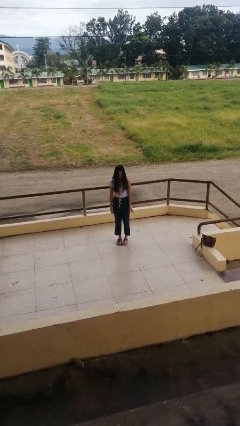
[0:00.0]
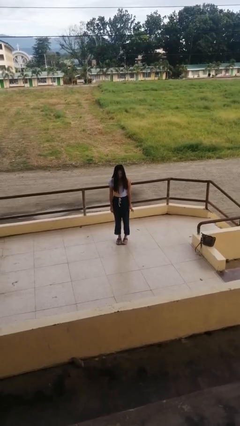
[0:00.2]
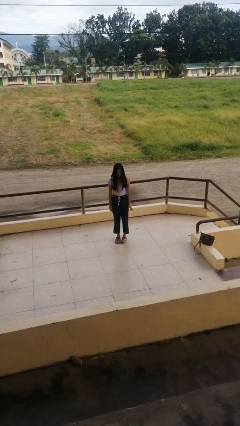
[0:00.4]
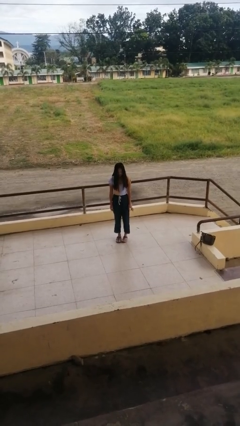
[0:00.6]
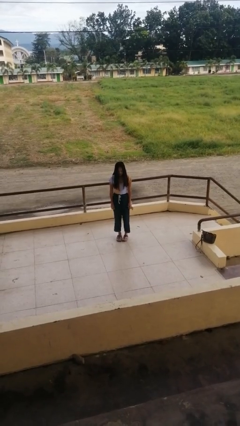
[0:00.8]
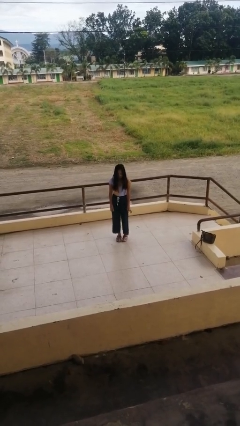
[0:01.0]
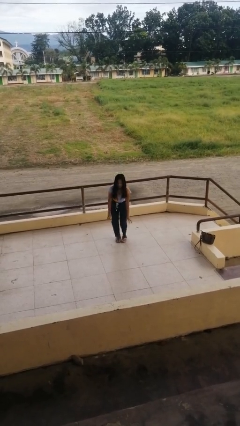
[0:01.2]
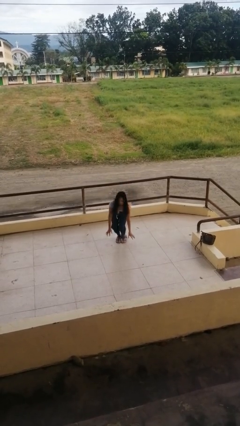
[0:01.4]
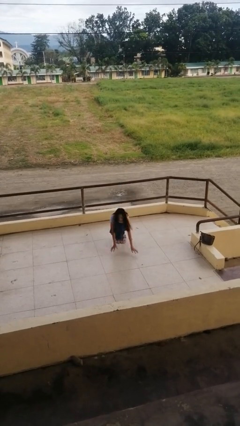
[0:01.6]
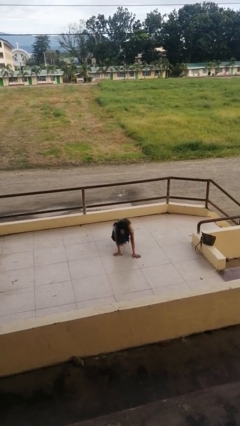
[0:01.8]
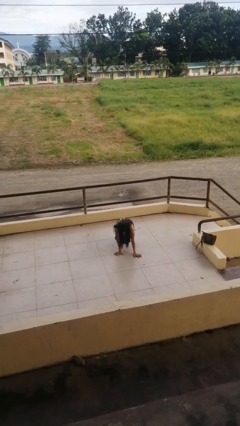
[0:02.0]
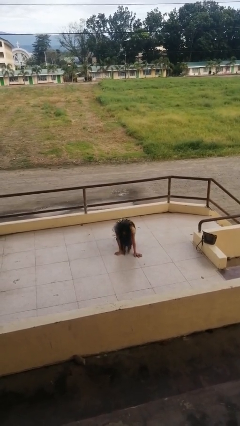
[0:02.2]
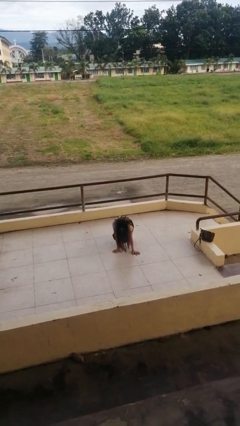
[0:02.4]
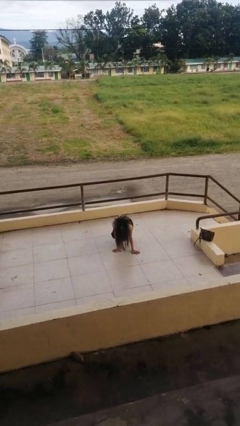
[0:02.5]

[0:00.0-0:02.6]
person falls while standing

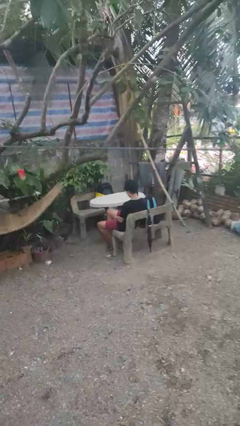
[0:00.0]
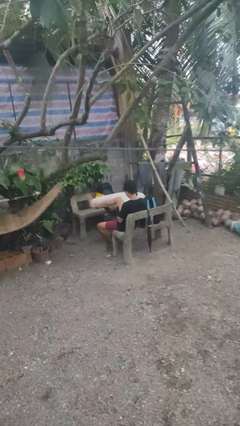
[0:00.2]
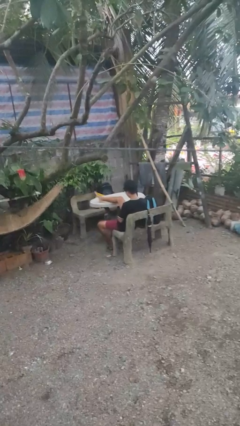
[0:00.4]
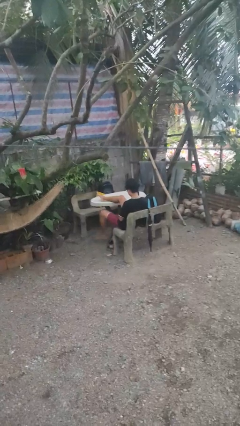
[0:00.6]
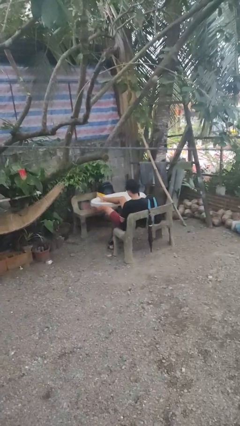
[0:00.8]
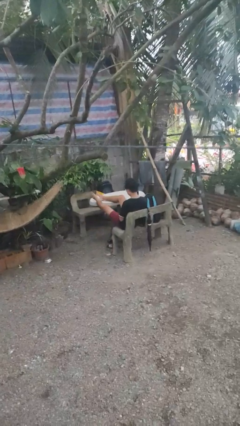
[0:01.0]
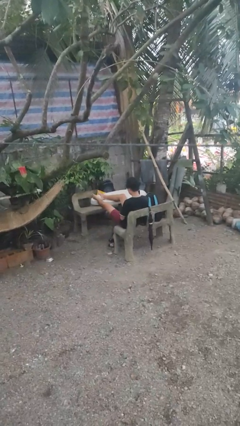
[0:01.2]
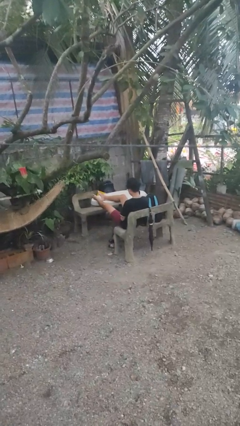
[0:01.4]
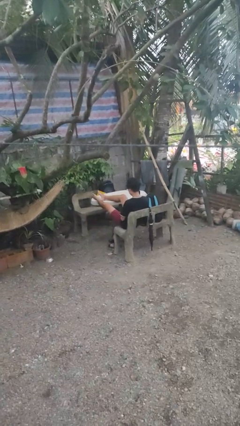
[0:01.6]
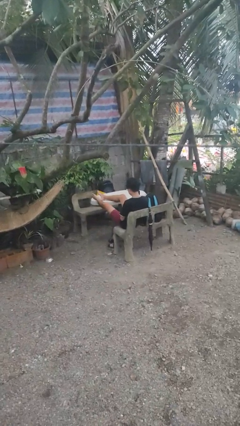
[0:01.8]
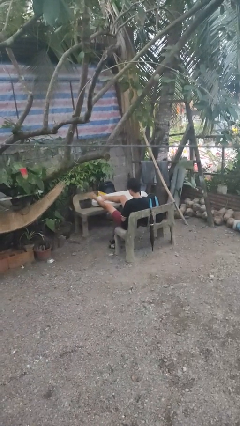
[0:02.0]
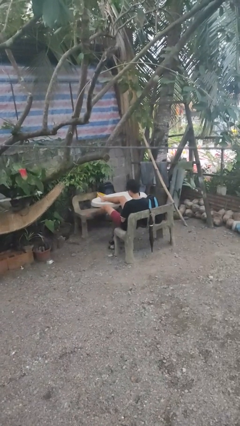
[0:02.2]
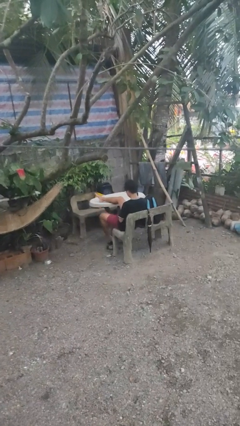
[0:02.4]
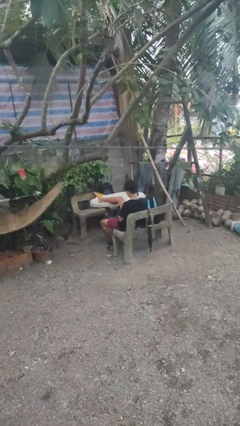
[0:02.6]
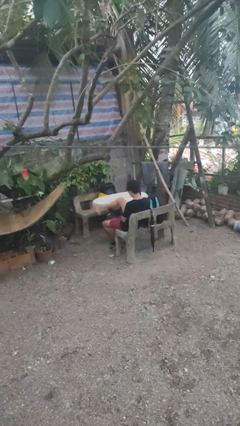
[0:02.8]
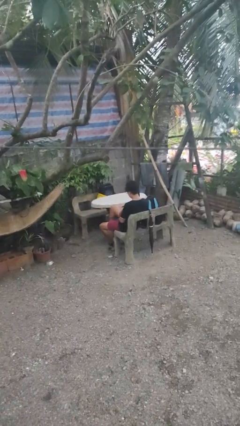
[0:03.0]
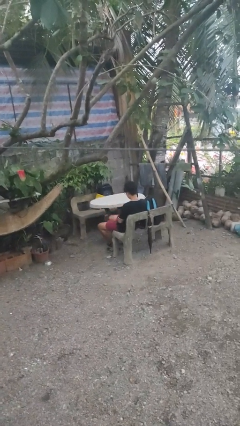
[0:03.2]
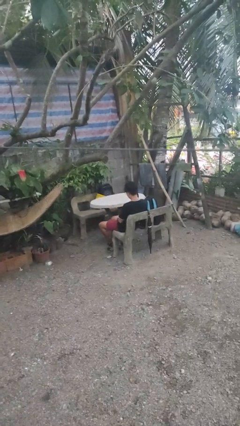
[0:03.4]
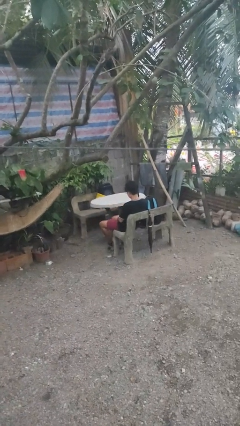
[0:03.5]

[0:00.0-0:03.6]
person puts feet up

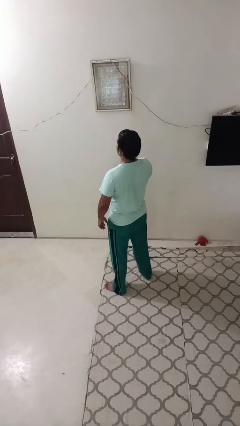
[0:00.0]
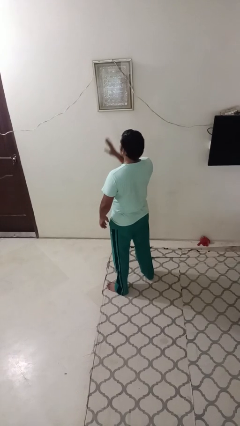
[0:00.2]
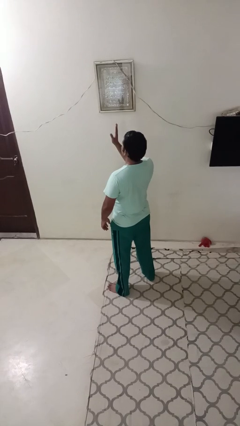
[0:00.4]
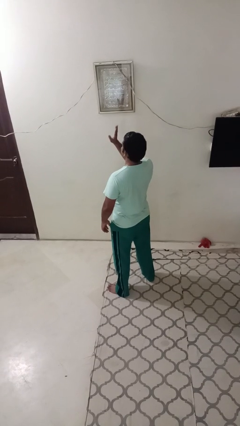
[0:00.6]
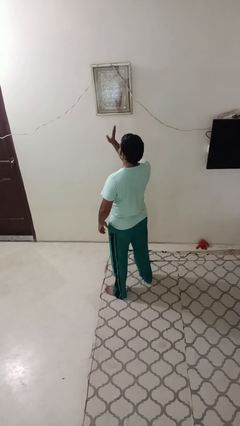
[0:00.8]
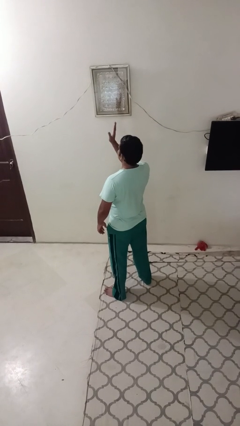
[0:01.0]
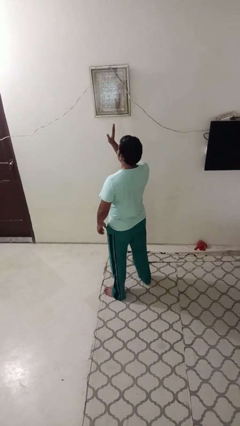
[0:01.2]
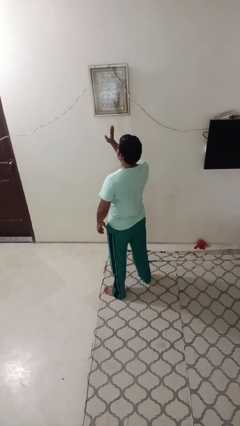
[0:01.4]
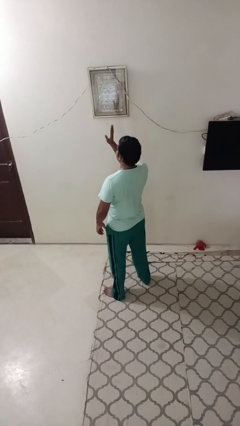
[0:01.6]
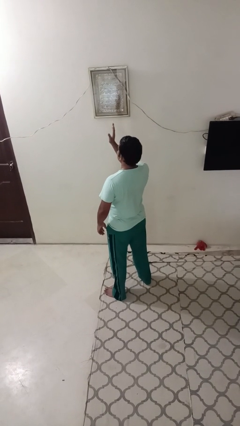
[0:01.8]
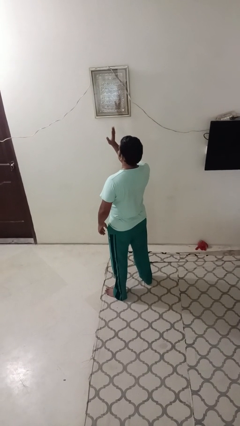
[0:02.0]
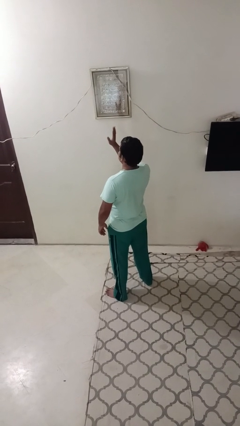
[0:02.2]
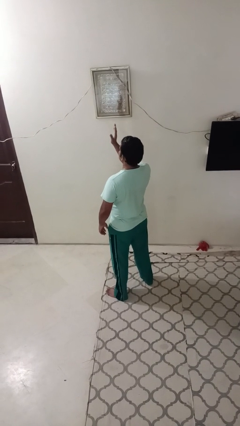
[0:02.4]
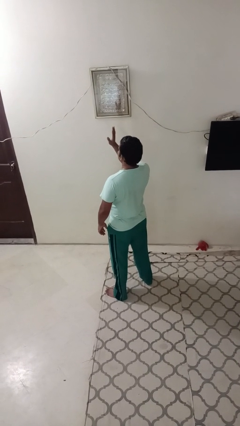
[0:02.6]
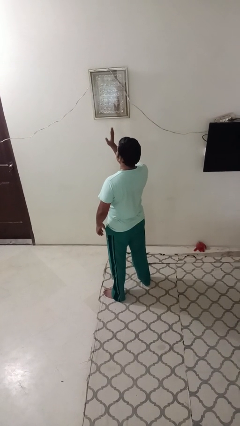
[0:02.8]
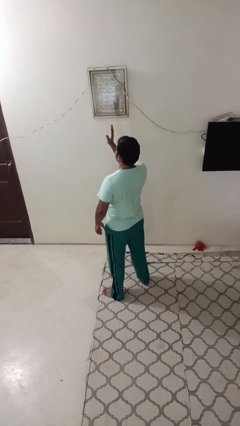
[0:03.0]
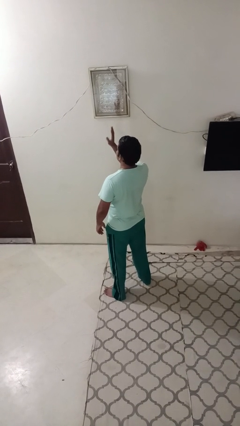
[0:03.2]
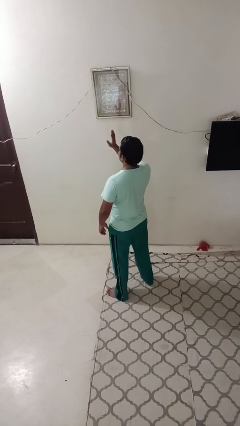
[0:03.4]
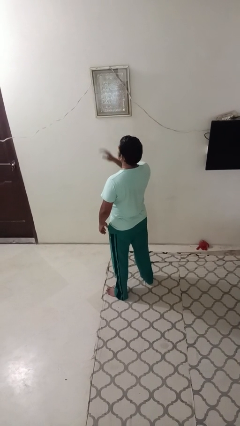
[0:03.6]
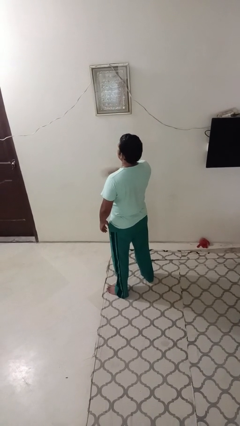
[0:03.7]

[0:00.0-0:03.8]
person waves at person

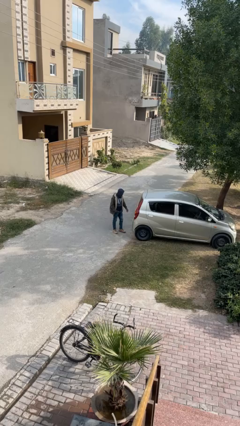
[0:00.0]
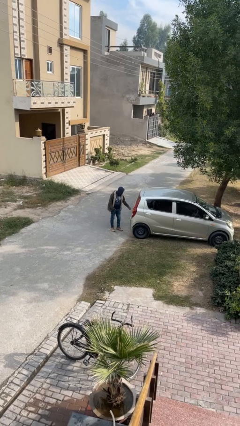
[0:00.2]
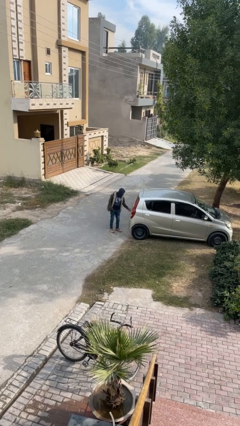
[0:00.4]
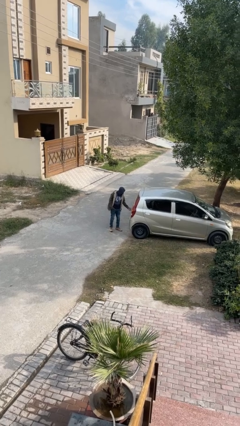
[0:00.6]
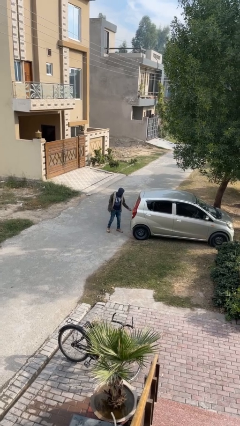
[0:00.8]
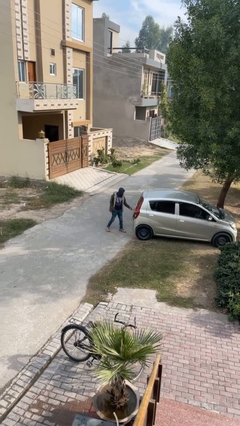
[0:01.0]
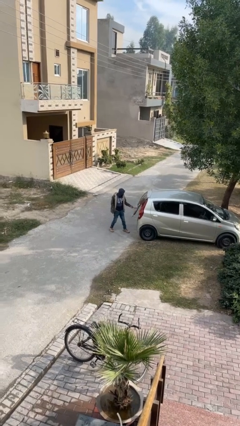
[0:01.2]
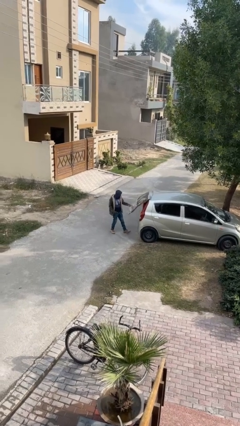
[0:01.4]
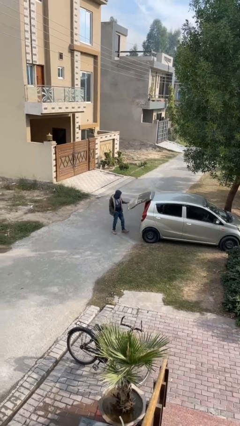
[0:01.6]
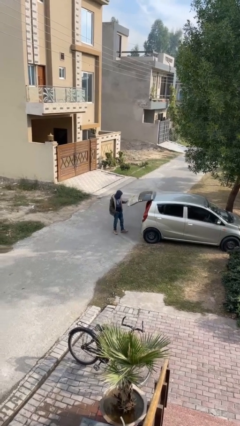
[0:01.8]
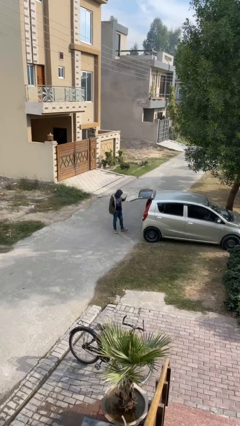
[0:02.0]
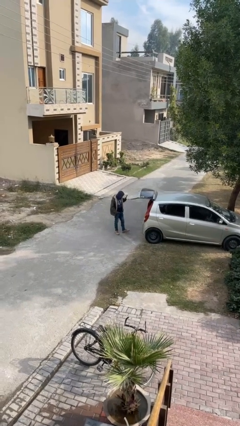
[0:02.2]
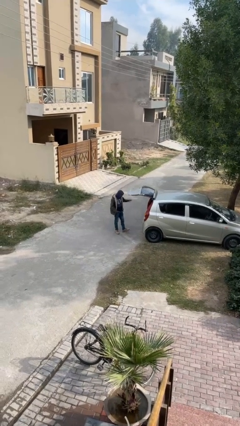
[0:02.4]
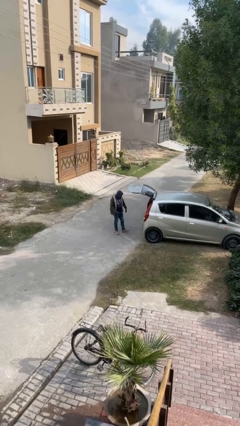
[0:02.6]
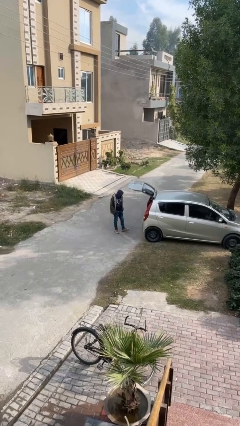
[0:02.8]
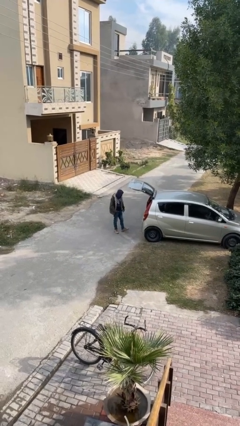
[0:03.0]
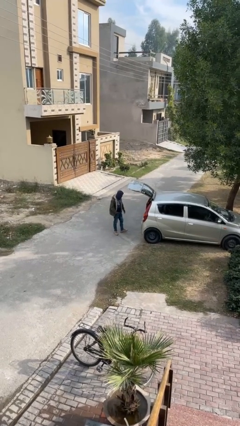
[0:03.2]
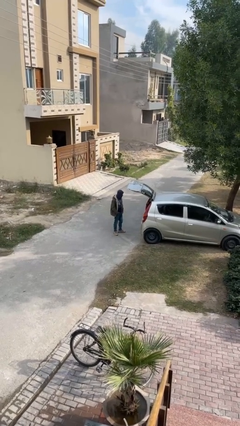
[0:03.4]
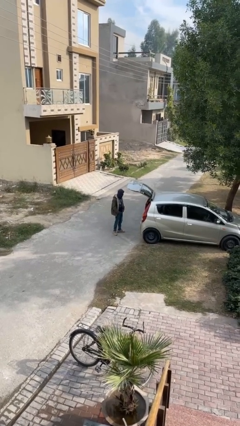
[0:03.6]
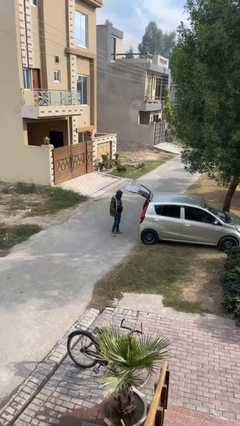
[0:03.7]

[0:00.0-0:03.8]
person opens car trunk

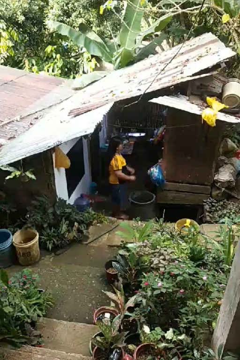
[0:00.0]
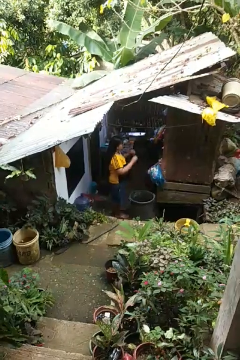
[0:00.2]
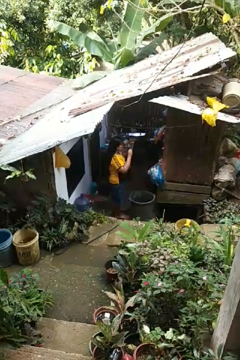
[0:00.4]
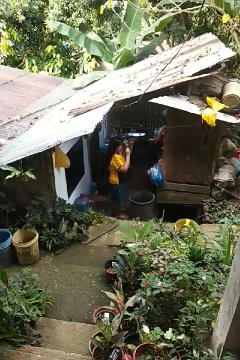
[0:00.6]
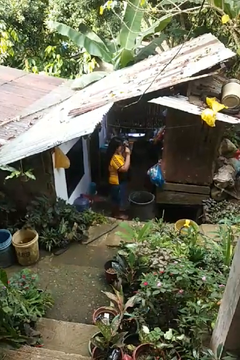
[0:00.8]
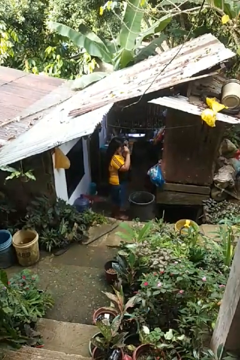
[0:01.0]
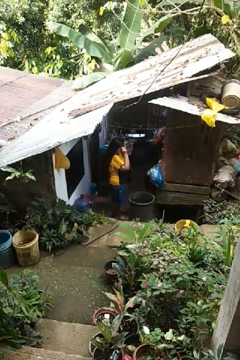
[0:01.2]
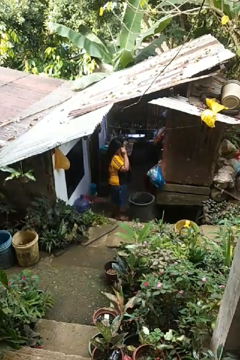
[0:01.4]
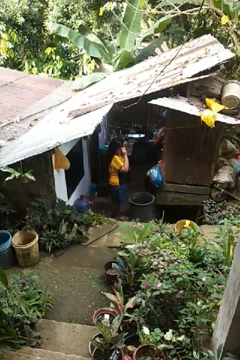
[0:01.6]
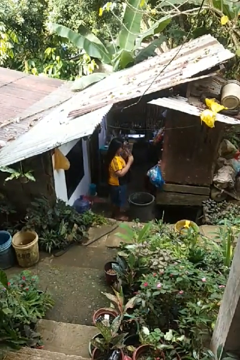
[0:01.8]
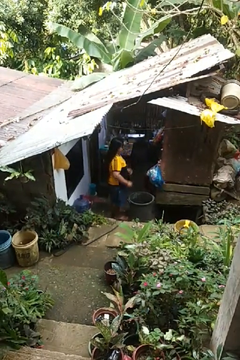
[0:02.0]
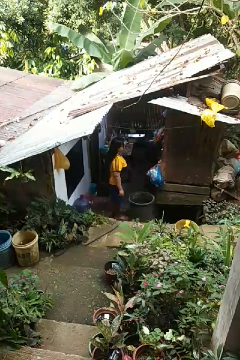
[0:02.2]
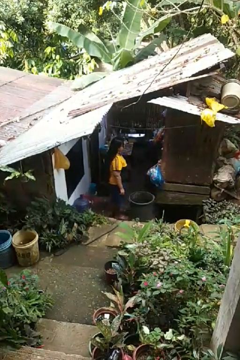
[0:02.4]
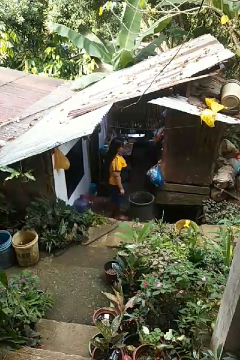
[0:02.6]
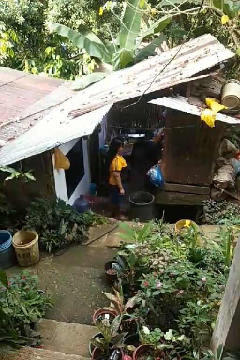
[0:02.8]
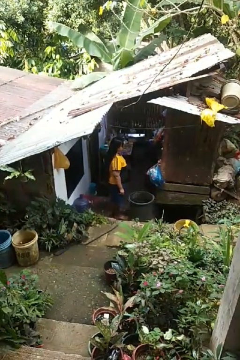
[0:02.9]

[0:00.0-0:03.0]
person puts on sunglasses

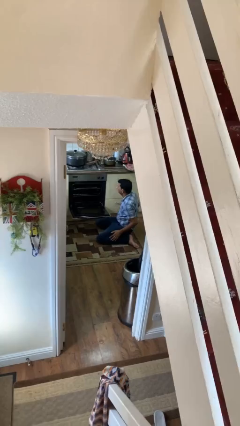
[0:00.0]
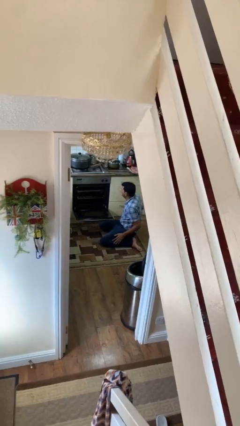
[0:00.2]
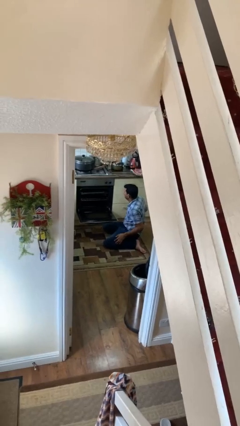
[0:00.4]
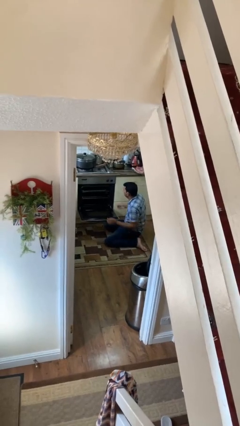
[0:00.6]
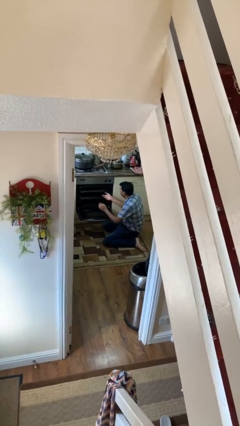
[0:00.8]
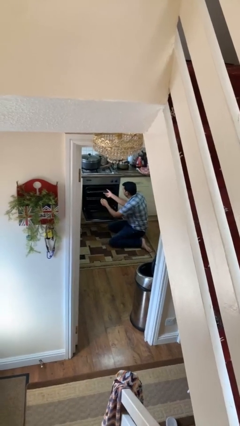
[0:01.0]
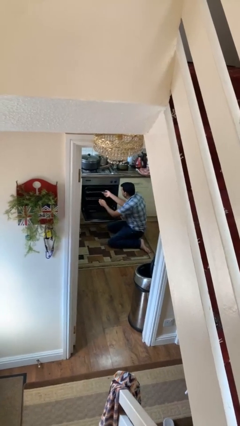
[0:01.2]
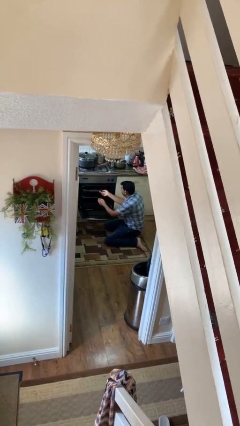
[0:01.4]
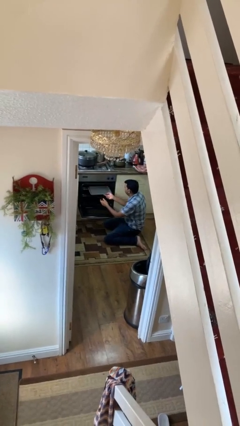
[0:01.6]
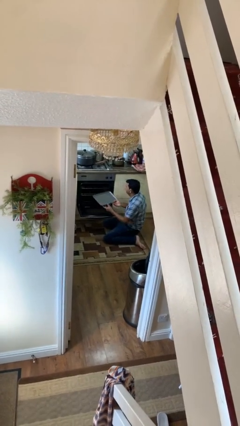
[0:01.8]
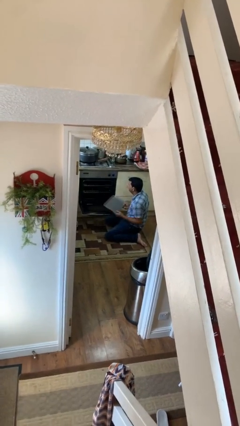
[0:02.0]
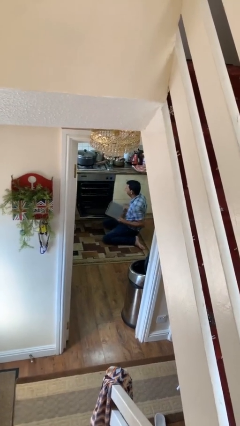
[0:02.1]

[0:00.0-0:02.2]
person takes object from oven
